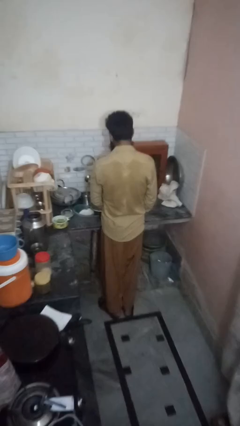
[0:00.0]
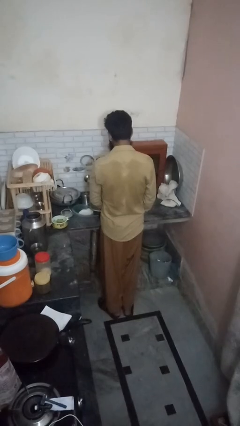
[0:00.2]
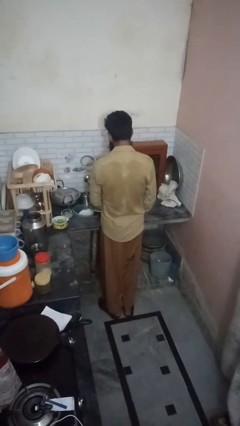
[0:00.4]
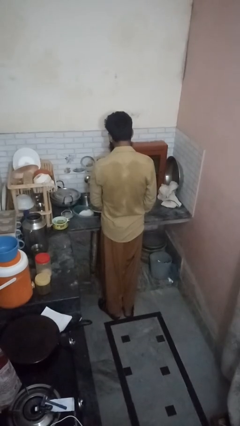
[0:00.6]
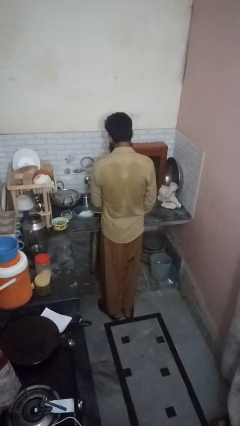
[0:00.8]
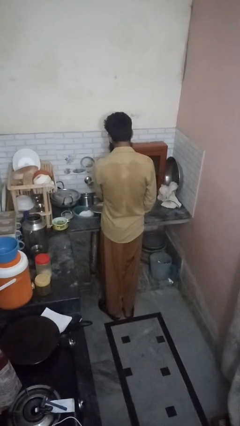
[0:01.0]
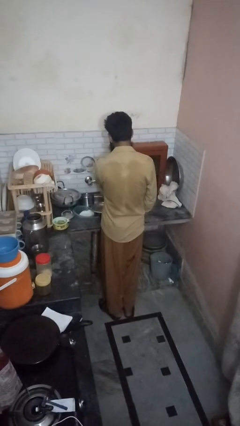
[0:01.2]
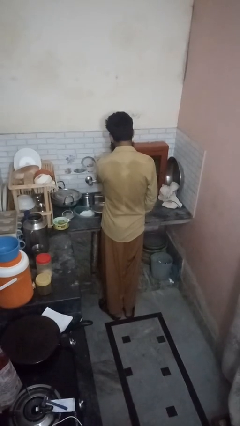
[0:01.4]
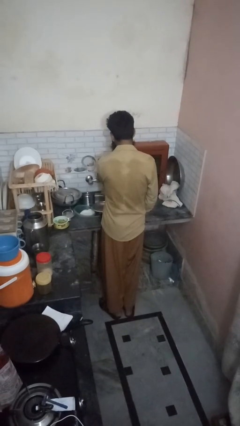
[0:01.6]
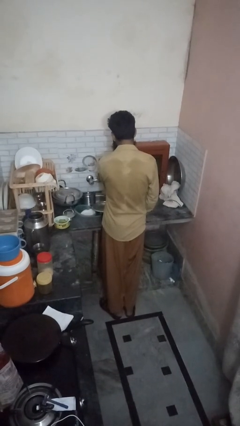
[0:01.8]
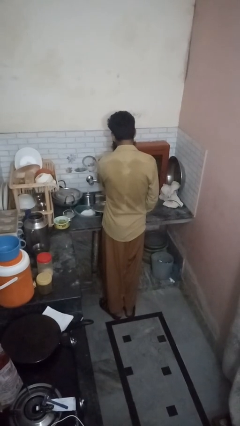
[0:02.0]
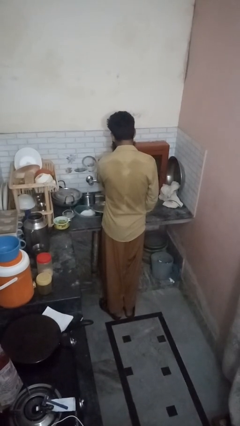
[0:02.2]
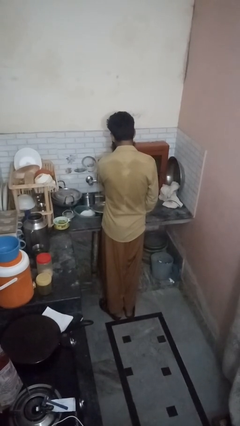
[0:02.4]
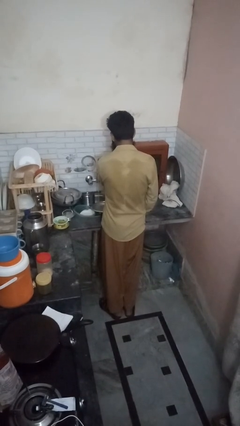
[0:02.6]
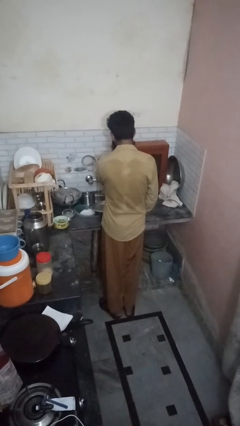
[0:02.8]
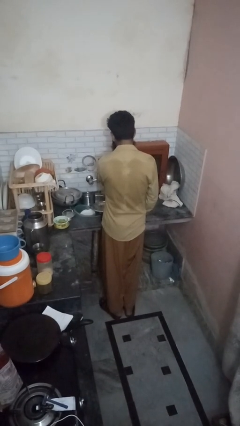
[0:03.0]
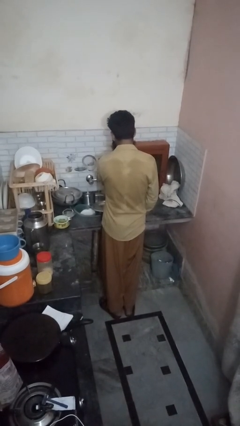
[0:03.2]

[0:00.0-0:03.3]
person opens dishwasher

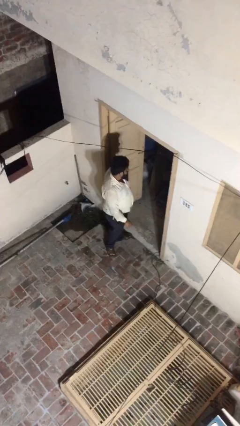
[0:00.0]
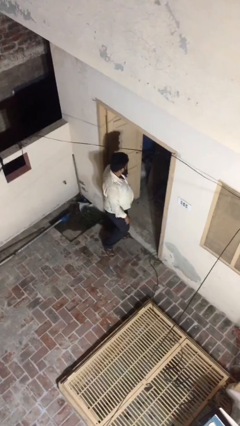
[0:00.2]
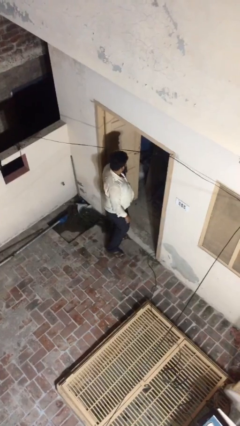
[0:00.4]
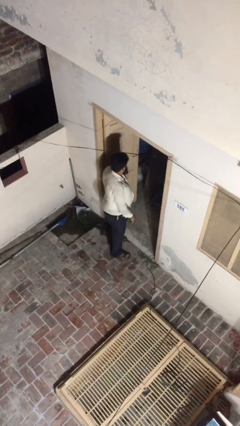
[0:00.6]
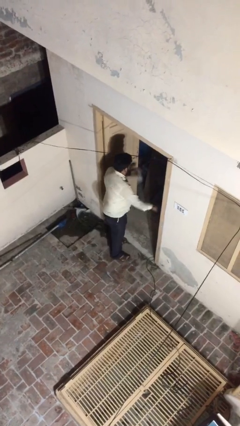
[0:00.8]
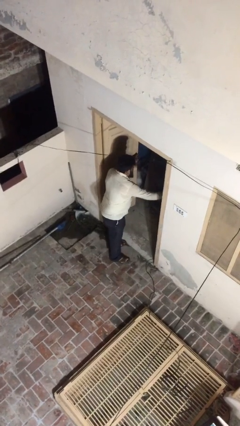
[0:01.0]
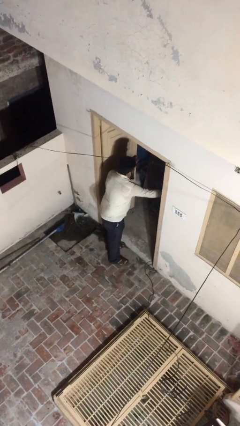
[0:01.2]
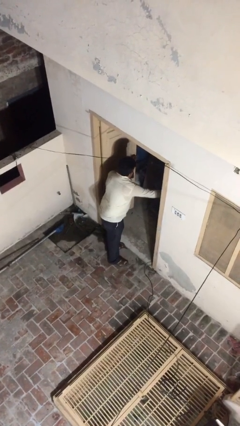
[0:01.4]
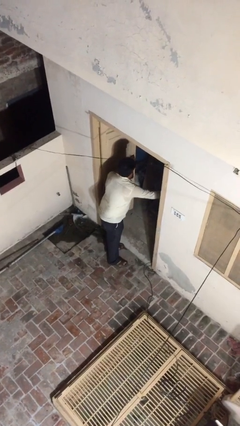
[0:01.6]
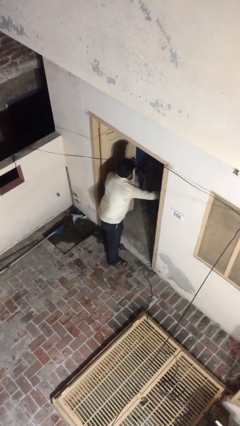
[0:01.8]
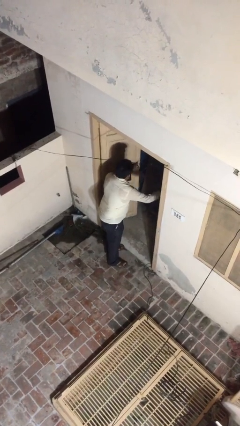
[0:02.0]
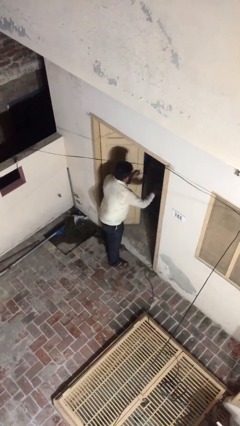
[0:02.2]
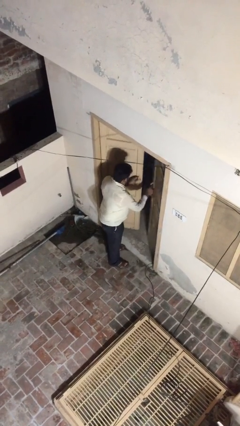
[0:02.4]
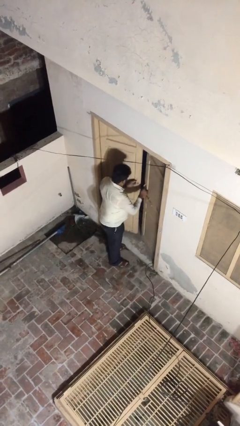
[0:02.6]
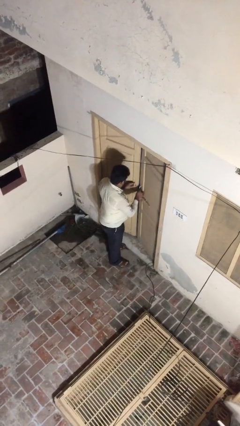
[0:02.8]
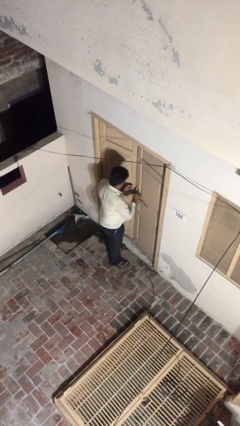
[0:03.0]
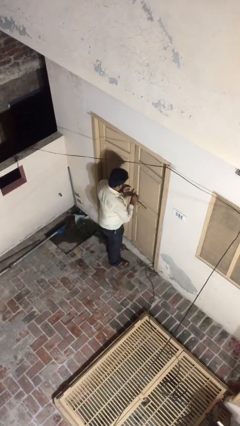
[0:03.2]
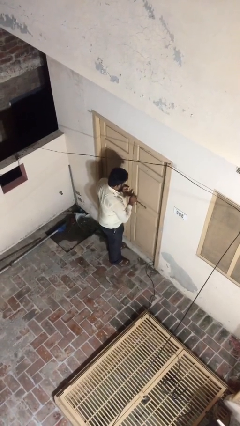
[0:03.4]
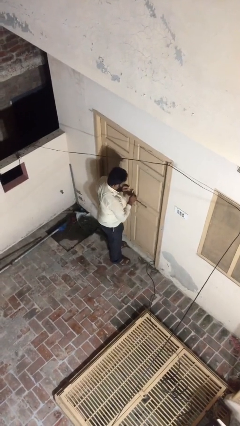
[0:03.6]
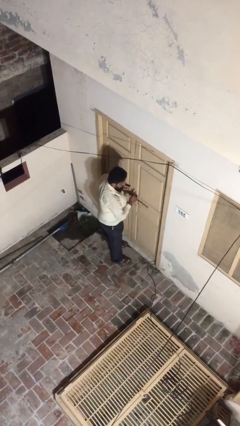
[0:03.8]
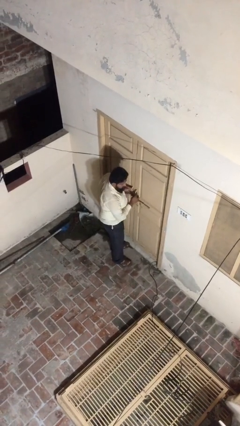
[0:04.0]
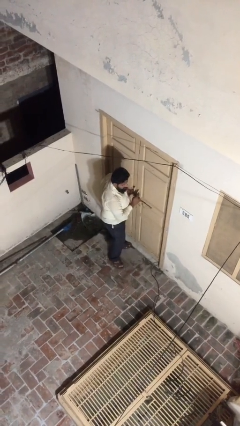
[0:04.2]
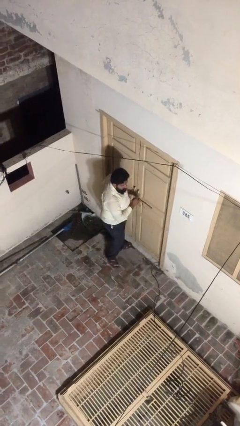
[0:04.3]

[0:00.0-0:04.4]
person closes facility door

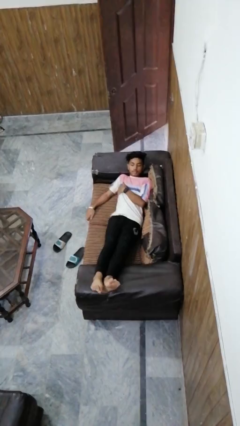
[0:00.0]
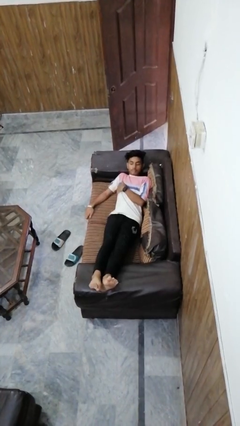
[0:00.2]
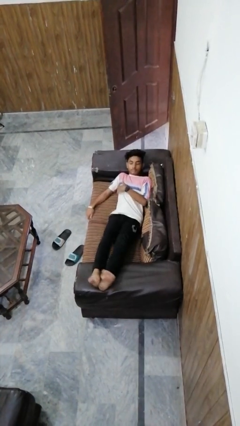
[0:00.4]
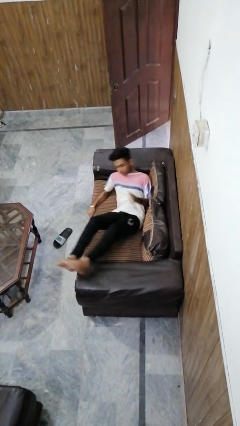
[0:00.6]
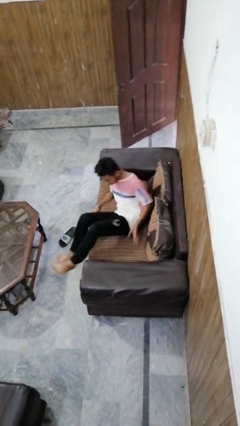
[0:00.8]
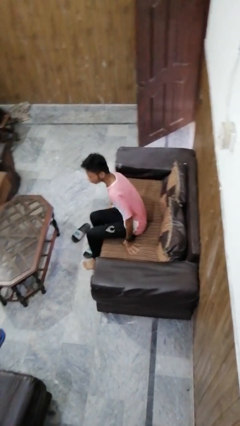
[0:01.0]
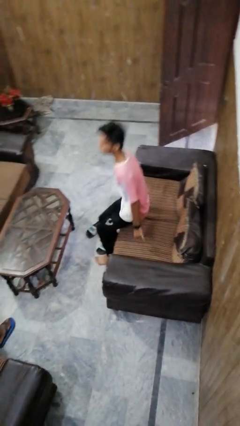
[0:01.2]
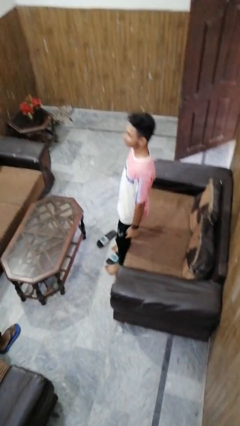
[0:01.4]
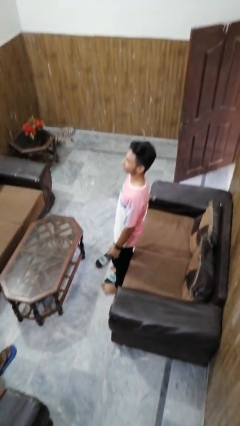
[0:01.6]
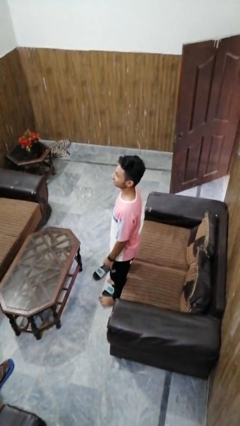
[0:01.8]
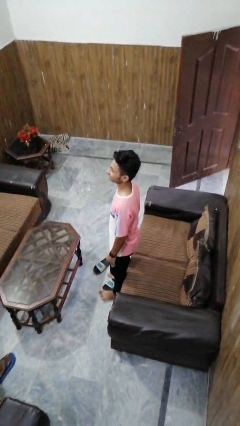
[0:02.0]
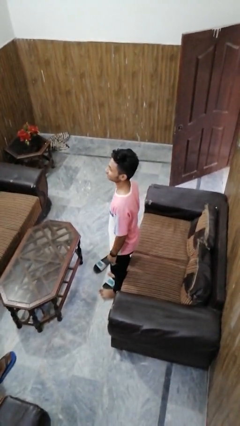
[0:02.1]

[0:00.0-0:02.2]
person stands up

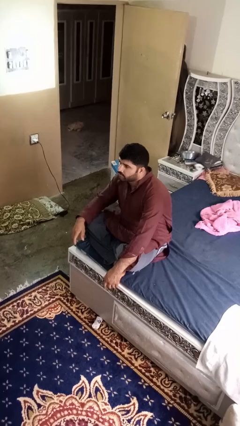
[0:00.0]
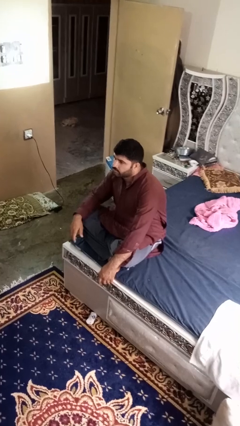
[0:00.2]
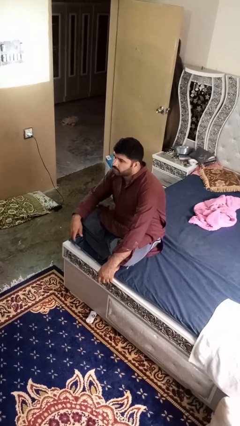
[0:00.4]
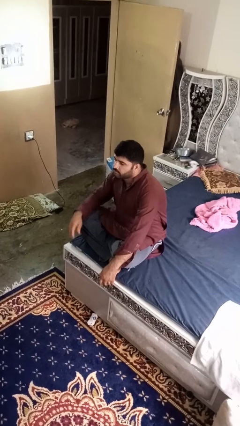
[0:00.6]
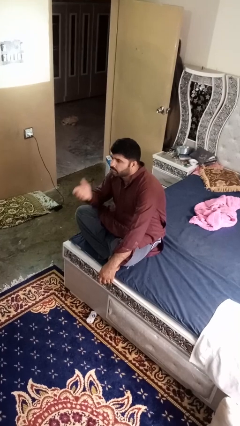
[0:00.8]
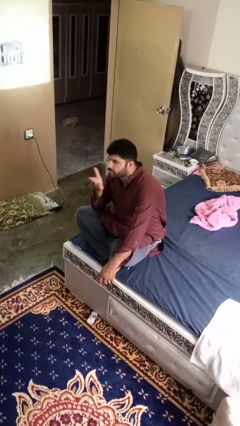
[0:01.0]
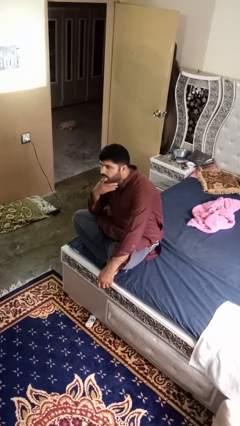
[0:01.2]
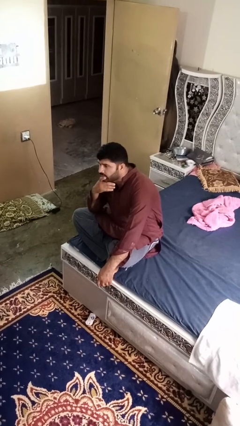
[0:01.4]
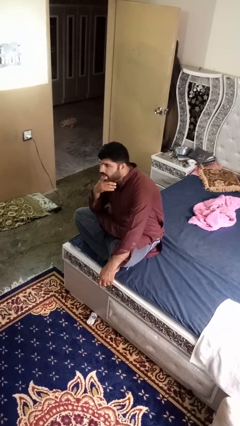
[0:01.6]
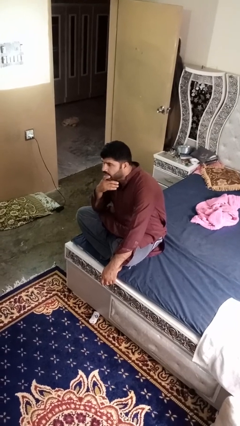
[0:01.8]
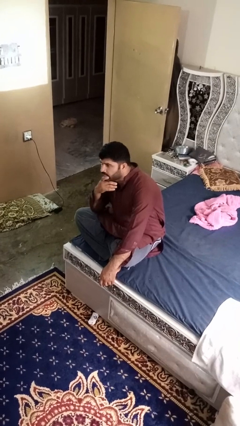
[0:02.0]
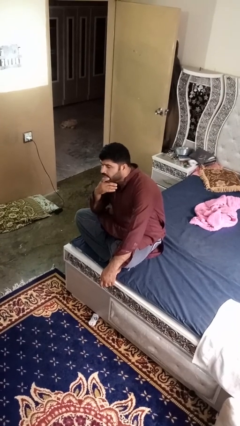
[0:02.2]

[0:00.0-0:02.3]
person strokes chin

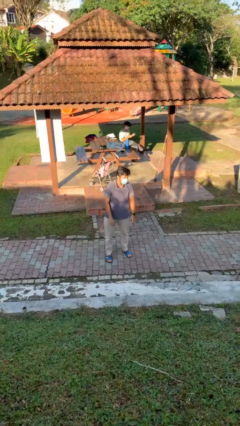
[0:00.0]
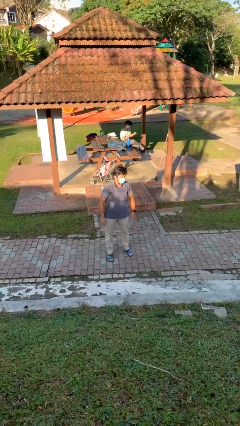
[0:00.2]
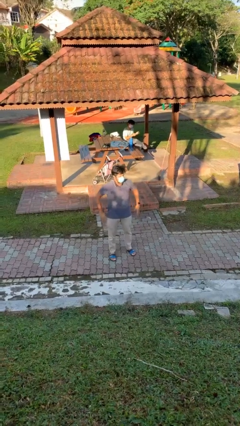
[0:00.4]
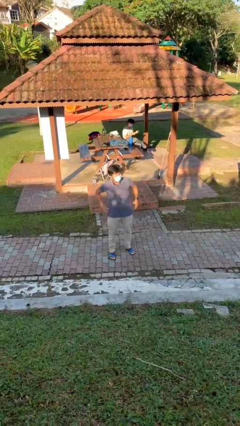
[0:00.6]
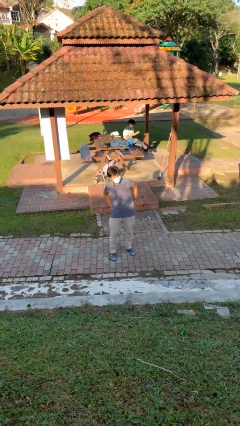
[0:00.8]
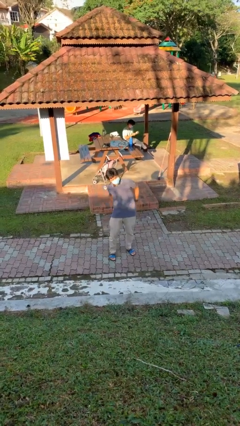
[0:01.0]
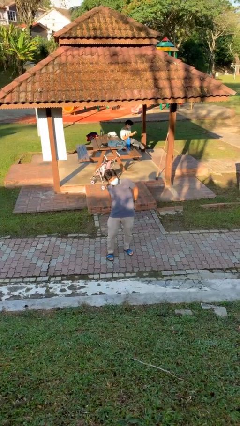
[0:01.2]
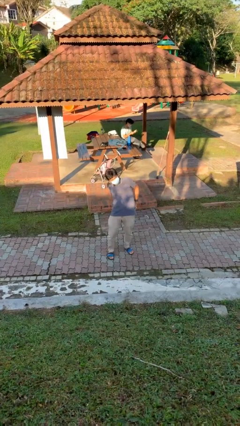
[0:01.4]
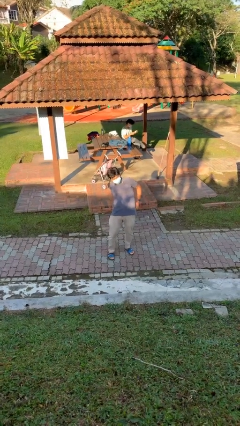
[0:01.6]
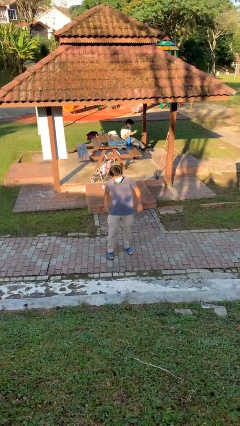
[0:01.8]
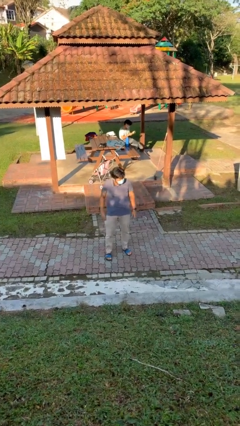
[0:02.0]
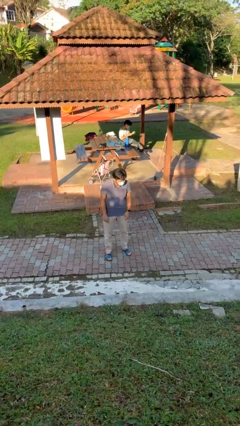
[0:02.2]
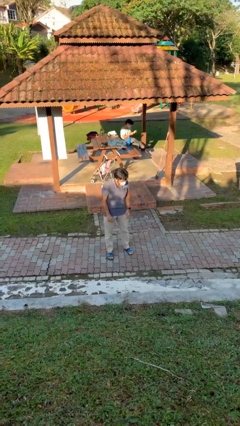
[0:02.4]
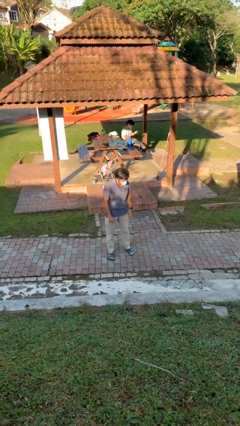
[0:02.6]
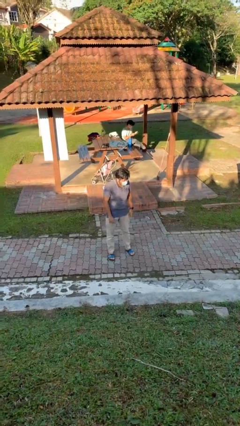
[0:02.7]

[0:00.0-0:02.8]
person stretches back

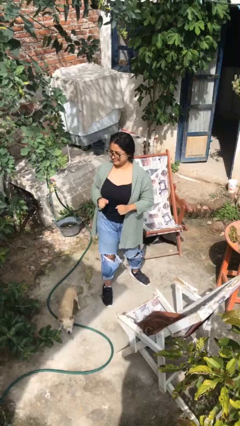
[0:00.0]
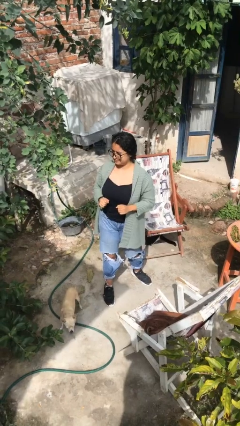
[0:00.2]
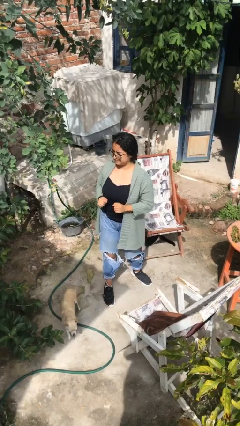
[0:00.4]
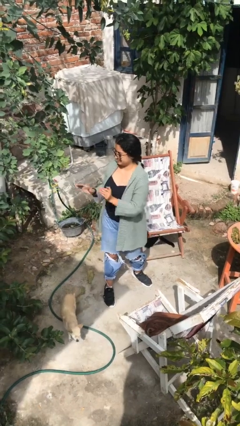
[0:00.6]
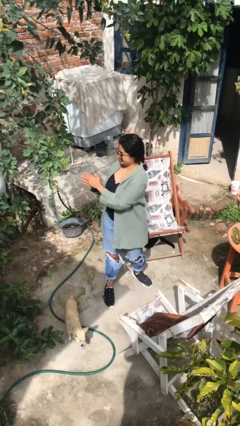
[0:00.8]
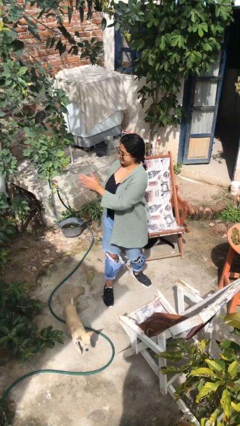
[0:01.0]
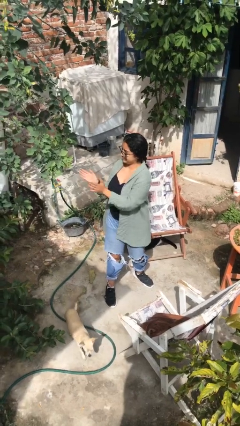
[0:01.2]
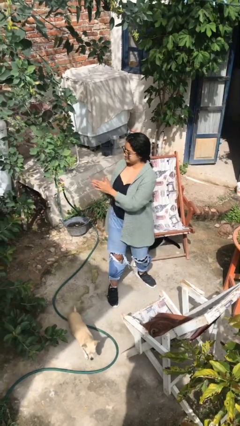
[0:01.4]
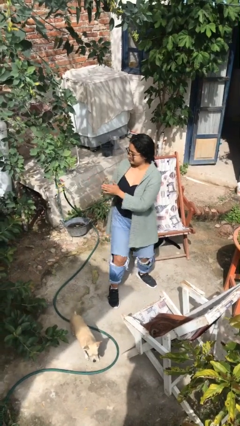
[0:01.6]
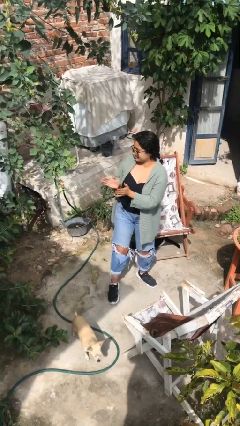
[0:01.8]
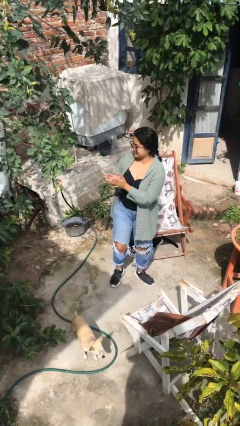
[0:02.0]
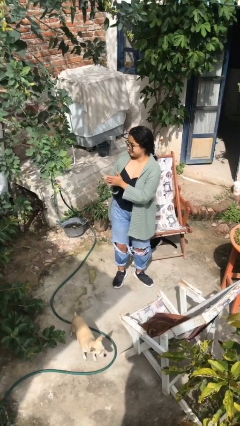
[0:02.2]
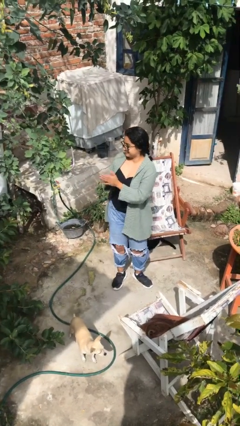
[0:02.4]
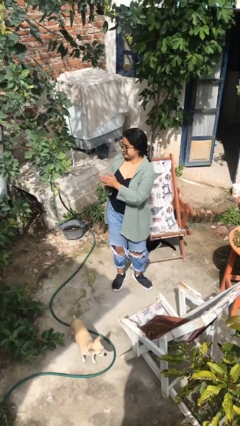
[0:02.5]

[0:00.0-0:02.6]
person claps hands

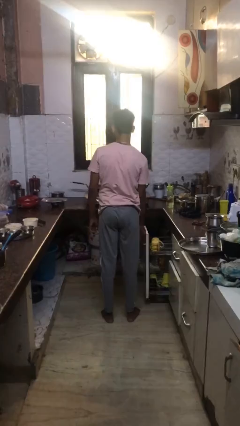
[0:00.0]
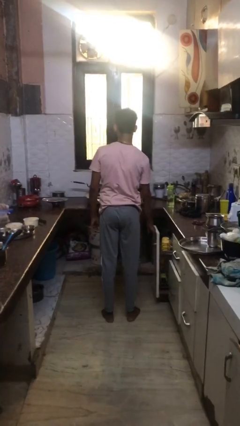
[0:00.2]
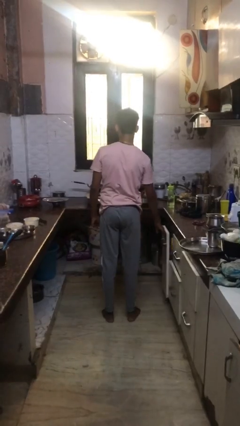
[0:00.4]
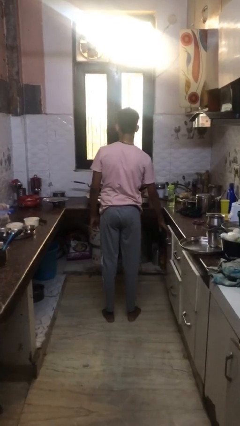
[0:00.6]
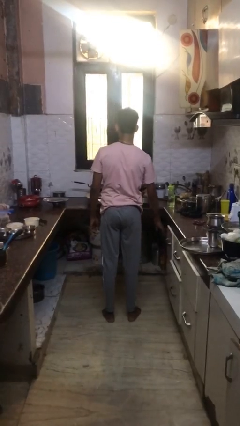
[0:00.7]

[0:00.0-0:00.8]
person closes dishwasher
